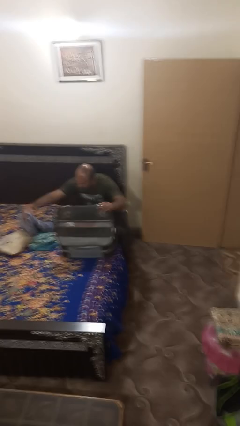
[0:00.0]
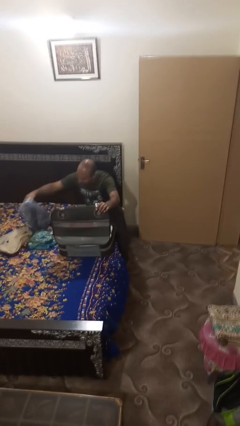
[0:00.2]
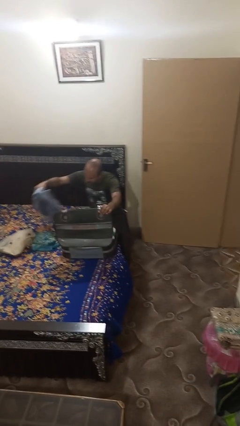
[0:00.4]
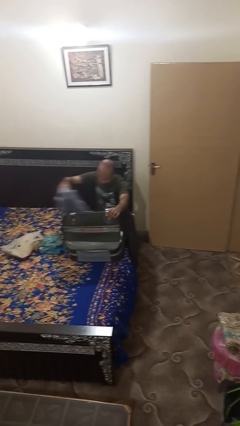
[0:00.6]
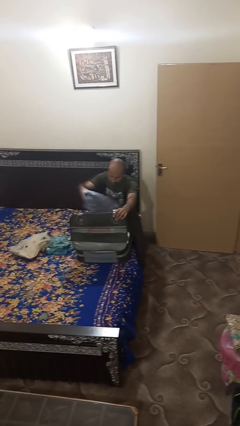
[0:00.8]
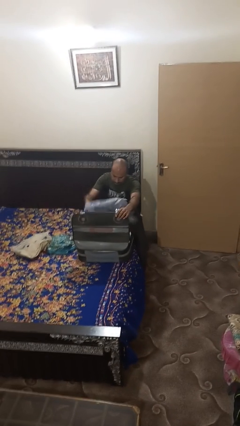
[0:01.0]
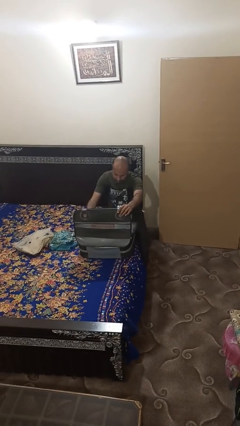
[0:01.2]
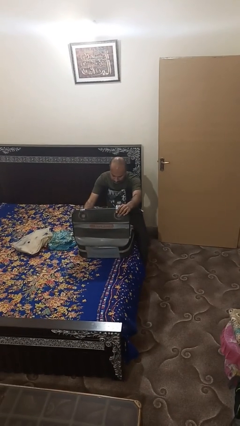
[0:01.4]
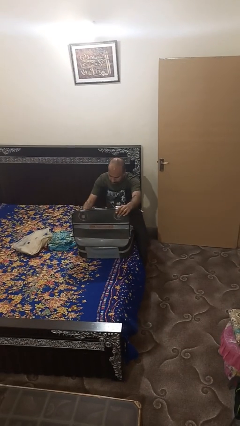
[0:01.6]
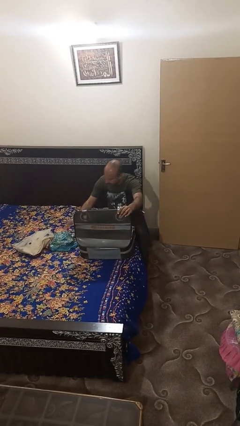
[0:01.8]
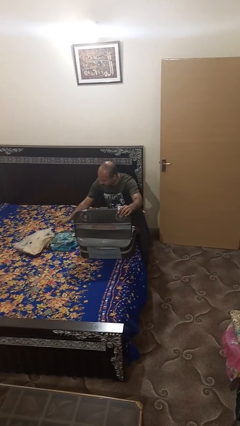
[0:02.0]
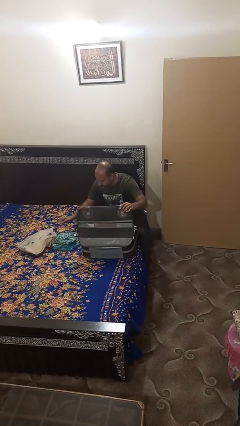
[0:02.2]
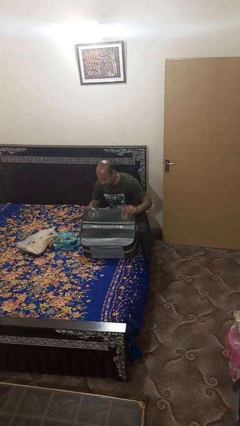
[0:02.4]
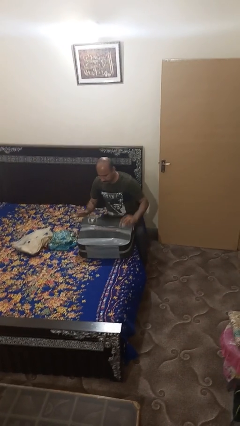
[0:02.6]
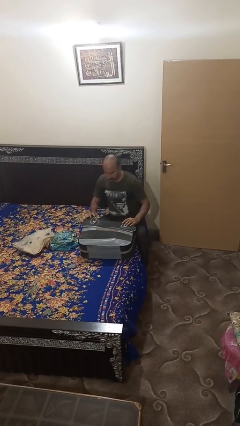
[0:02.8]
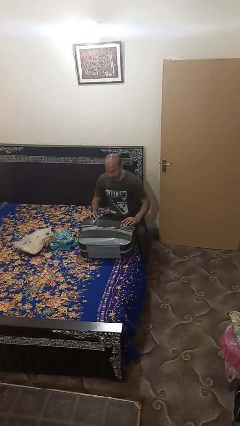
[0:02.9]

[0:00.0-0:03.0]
person loads clothes into suitcase

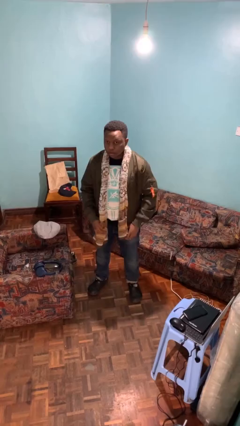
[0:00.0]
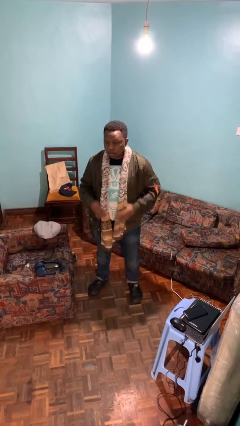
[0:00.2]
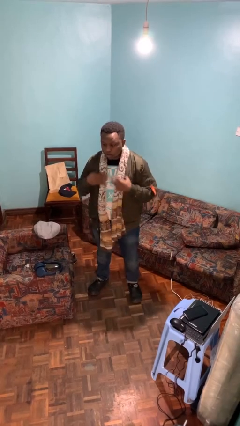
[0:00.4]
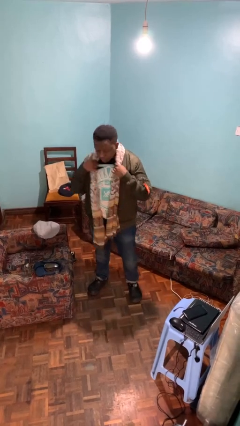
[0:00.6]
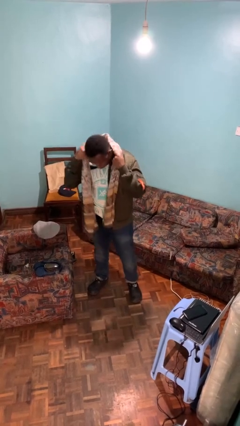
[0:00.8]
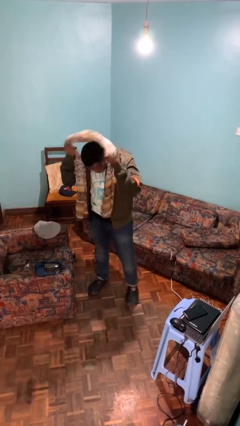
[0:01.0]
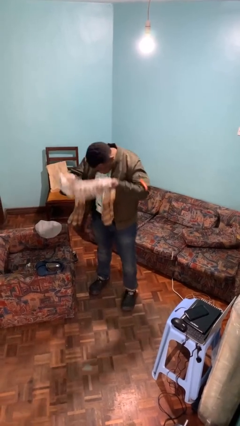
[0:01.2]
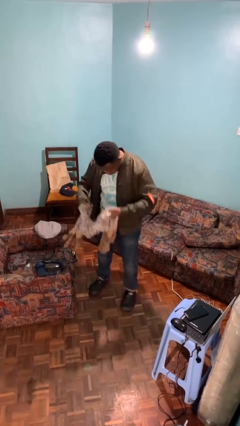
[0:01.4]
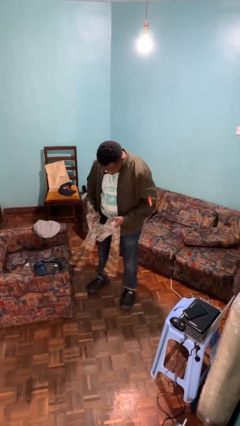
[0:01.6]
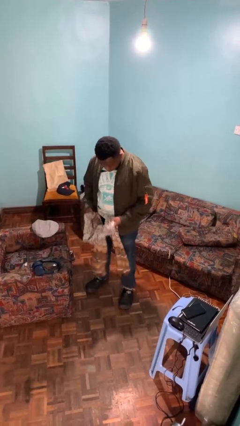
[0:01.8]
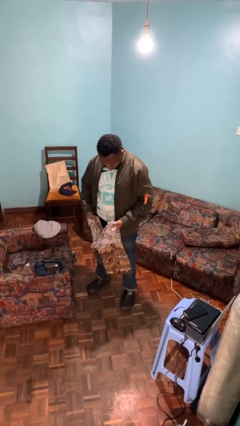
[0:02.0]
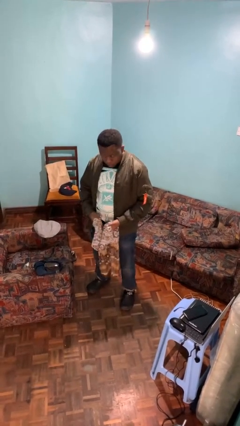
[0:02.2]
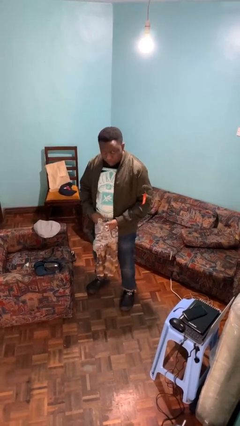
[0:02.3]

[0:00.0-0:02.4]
person takes off scarf

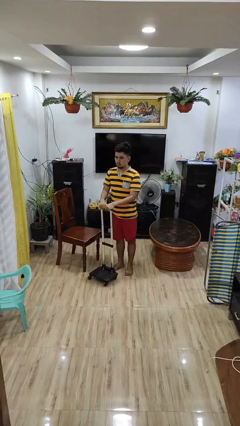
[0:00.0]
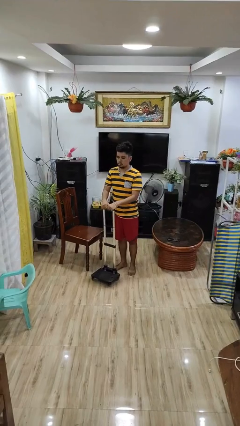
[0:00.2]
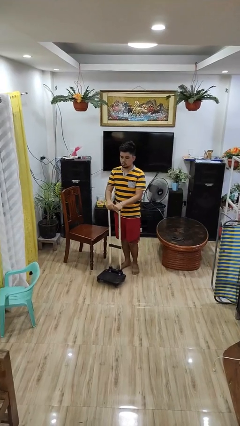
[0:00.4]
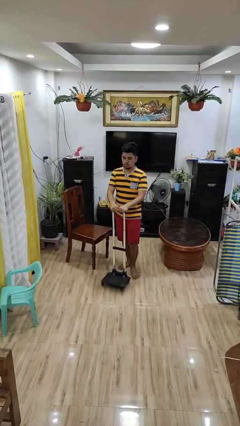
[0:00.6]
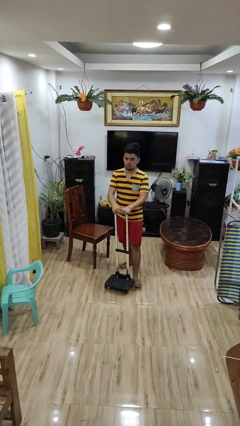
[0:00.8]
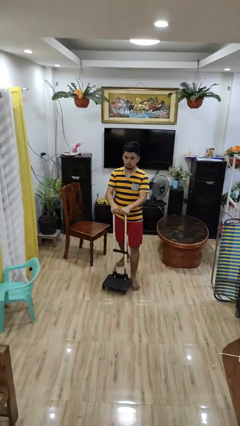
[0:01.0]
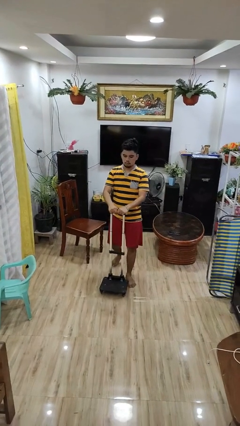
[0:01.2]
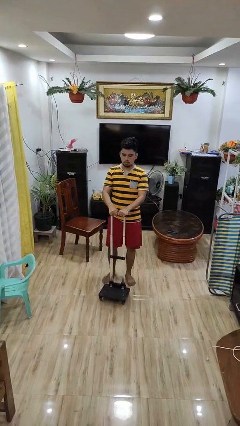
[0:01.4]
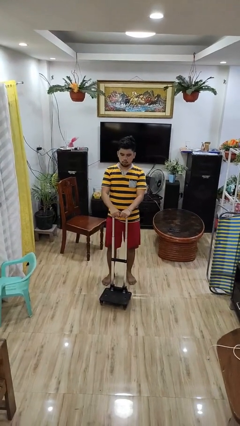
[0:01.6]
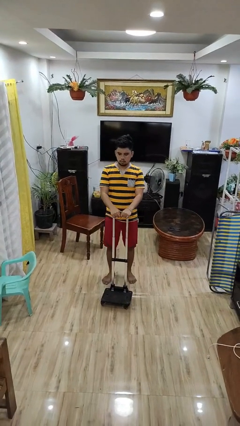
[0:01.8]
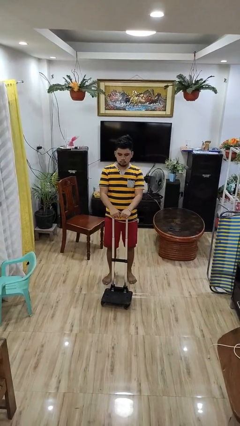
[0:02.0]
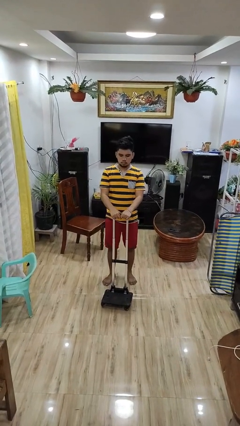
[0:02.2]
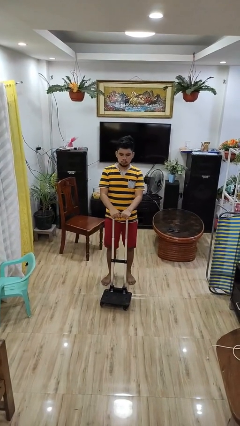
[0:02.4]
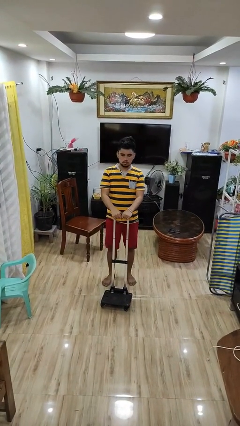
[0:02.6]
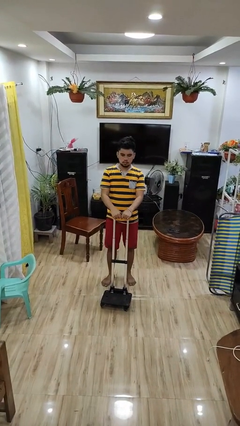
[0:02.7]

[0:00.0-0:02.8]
person pushes wheeled cart

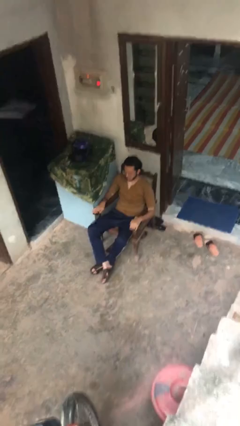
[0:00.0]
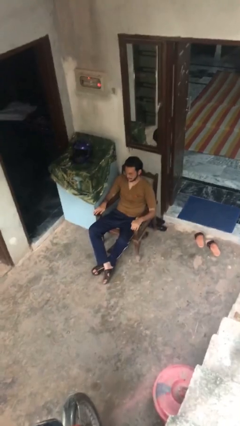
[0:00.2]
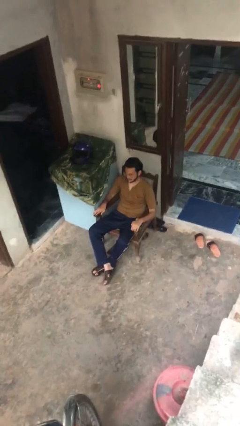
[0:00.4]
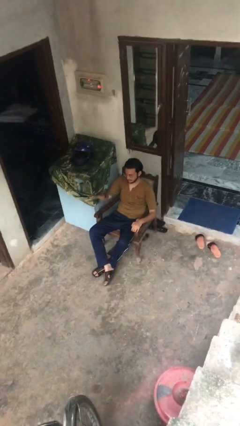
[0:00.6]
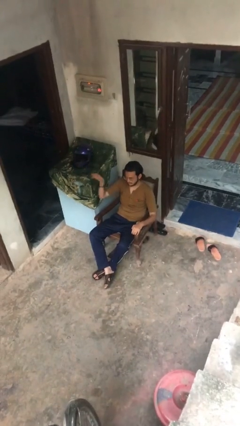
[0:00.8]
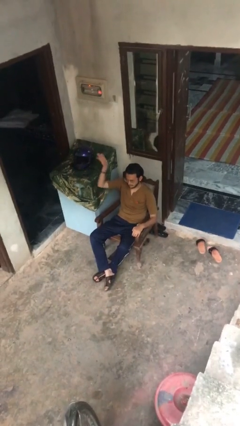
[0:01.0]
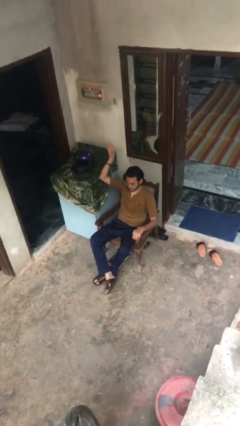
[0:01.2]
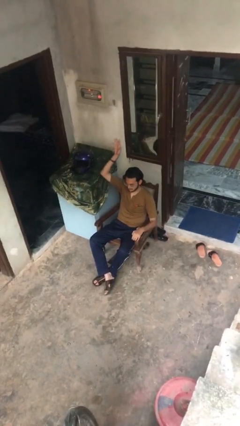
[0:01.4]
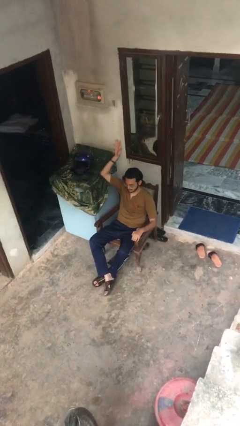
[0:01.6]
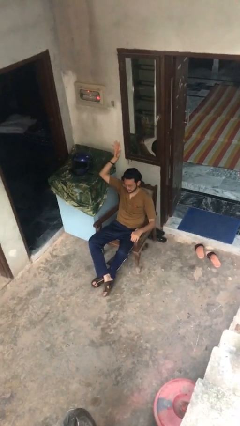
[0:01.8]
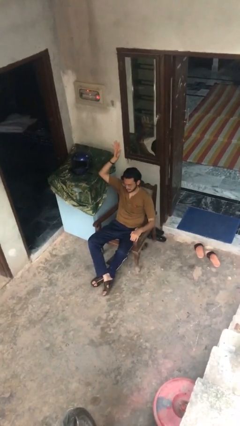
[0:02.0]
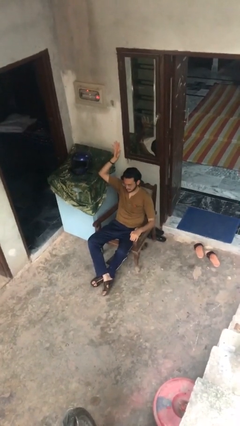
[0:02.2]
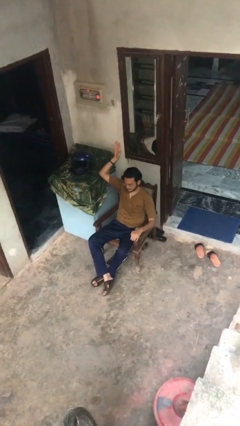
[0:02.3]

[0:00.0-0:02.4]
person gestures raise hand

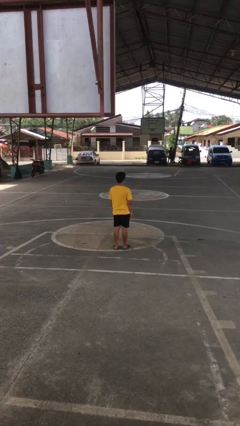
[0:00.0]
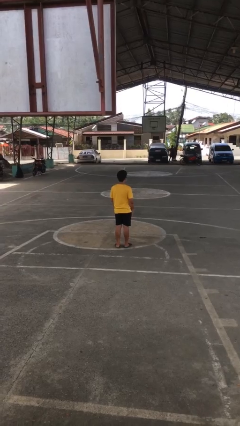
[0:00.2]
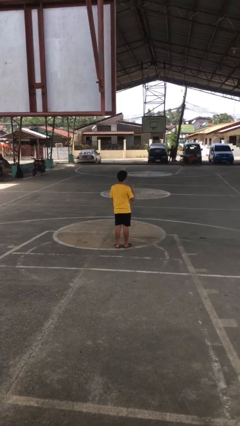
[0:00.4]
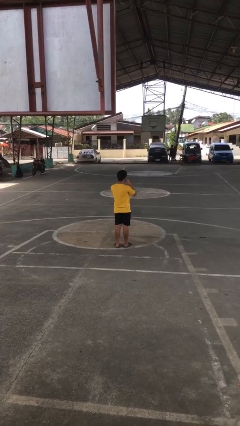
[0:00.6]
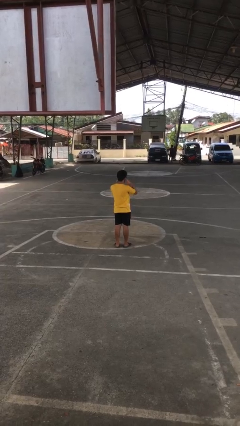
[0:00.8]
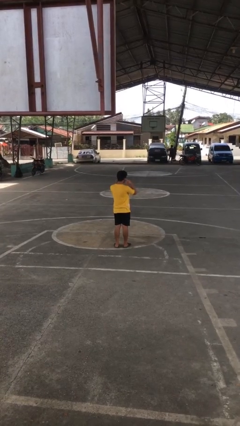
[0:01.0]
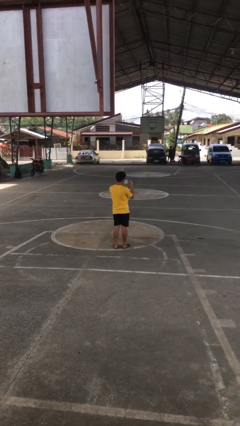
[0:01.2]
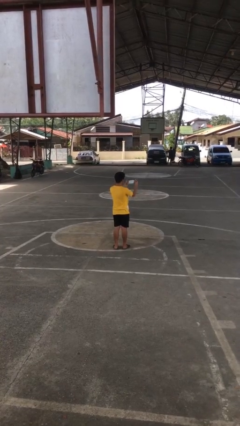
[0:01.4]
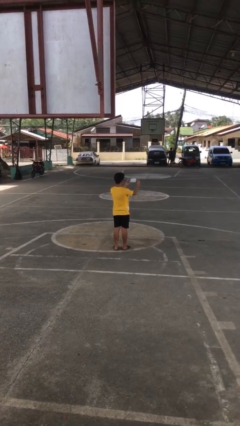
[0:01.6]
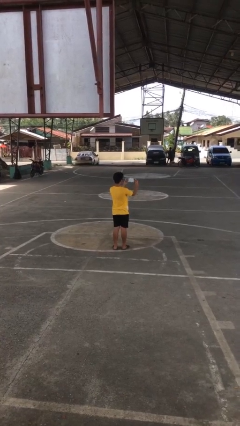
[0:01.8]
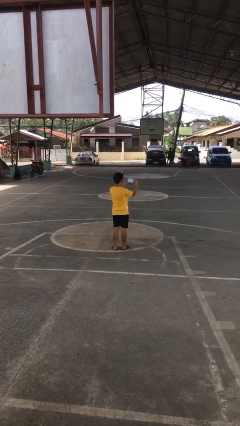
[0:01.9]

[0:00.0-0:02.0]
person takes off facemask

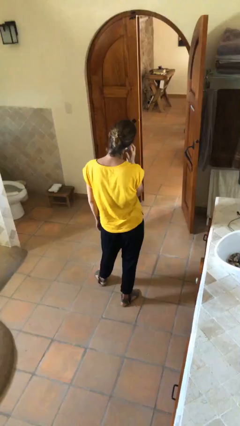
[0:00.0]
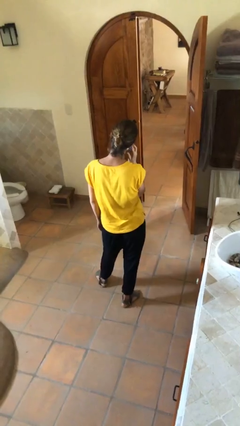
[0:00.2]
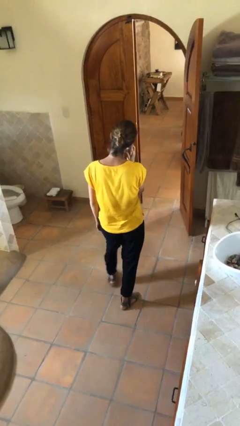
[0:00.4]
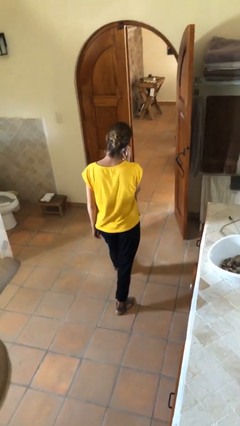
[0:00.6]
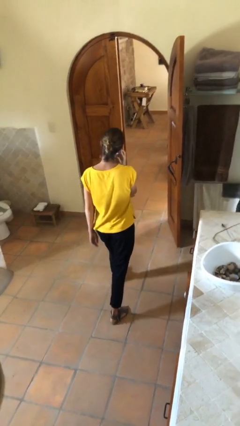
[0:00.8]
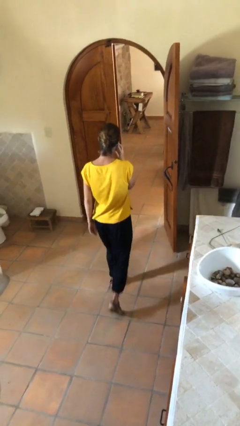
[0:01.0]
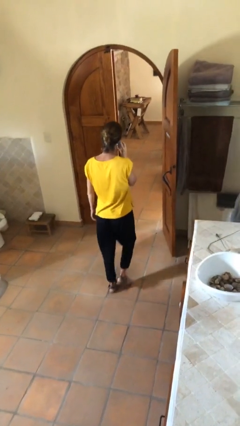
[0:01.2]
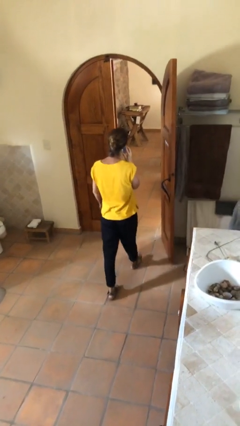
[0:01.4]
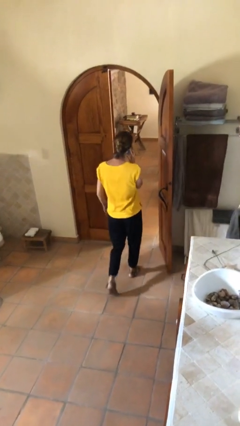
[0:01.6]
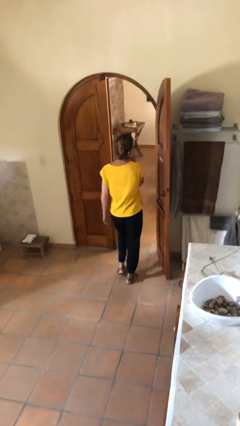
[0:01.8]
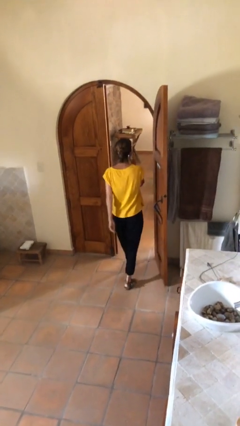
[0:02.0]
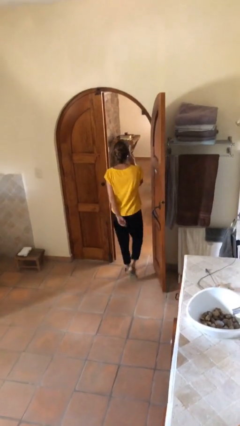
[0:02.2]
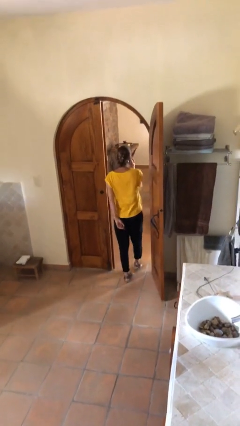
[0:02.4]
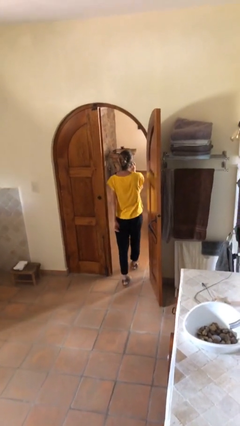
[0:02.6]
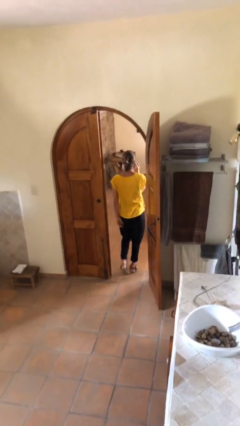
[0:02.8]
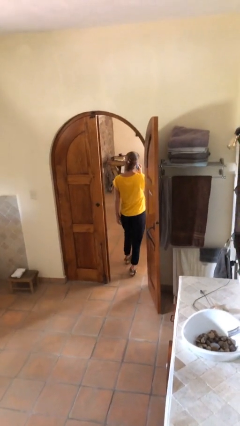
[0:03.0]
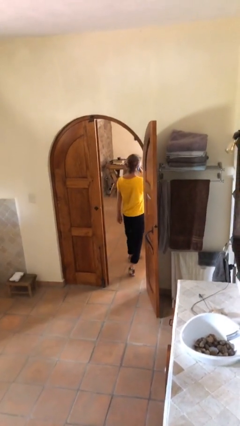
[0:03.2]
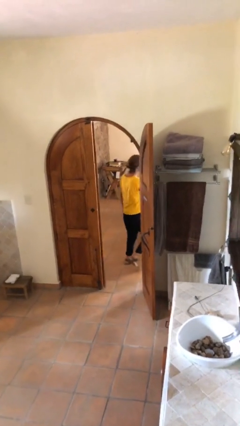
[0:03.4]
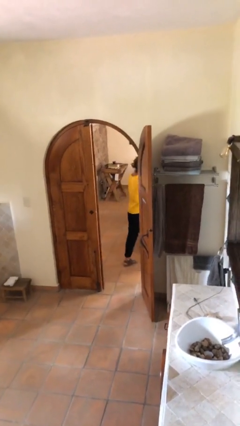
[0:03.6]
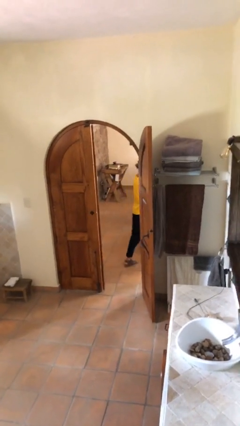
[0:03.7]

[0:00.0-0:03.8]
person exits scene through structure

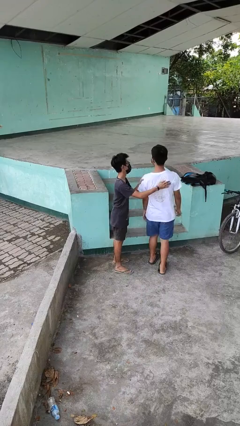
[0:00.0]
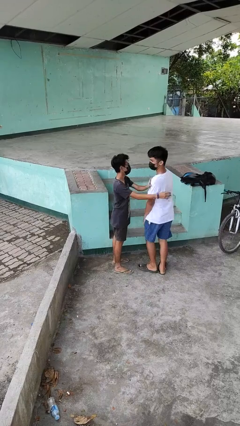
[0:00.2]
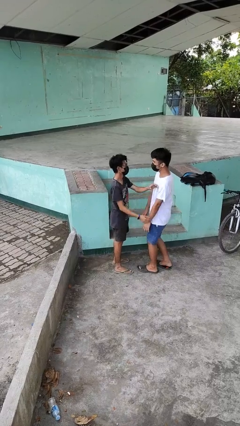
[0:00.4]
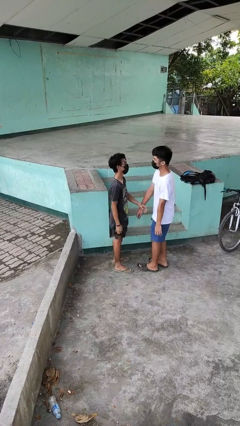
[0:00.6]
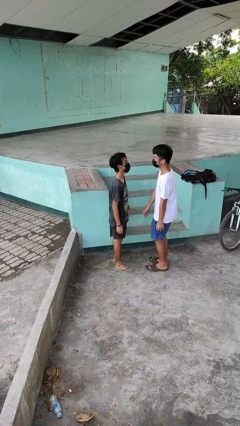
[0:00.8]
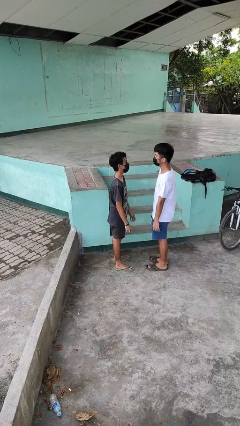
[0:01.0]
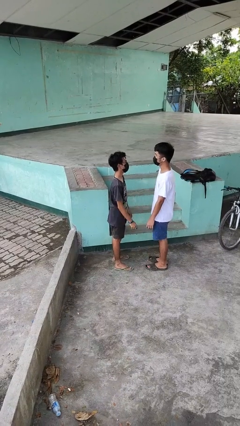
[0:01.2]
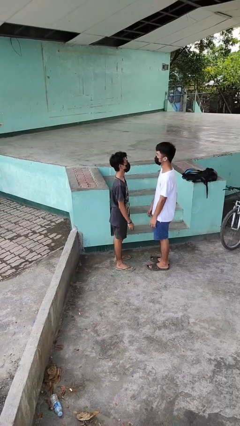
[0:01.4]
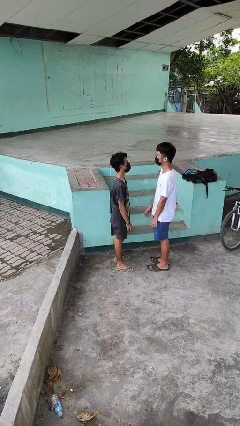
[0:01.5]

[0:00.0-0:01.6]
person spins person around
